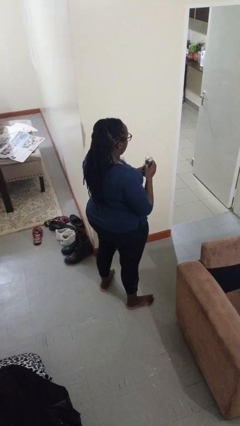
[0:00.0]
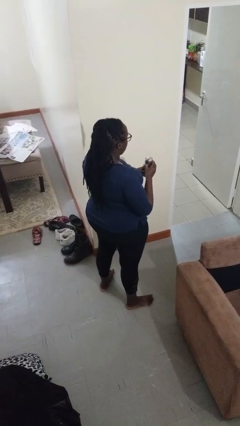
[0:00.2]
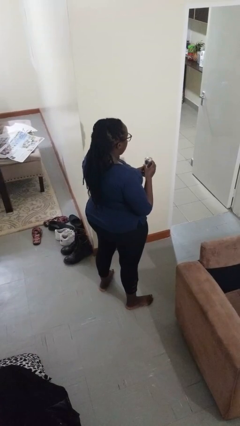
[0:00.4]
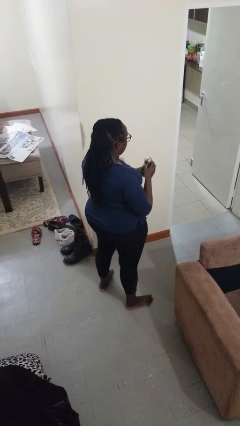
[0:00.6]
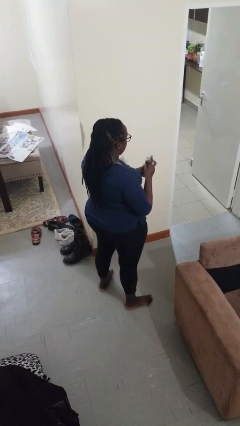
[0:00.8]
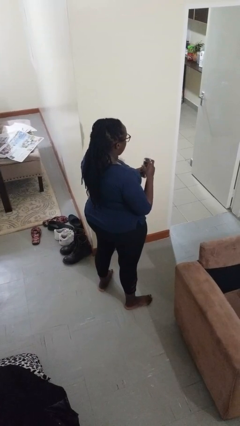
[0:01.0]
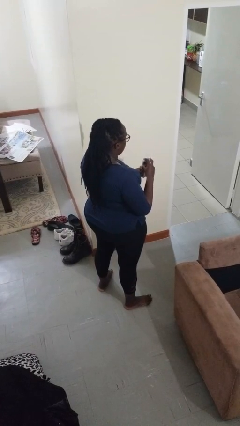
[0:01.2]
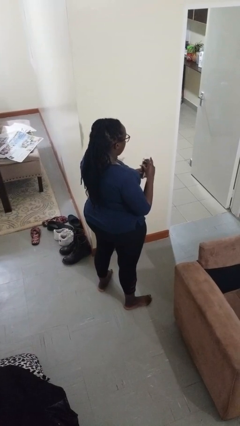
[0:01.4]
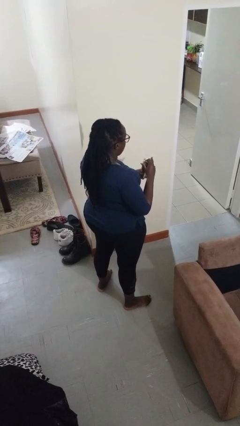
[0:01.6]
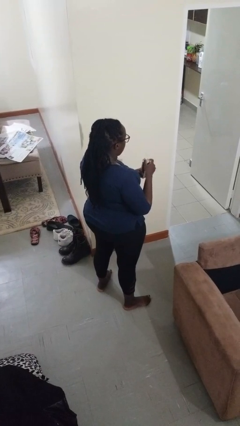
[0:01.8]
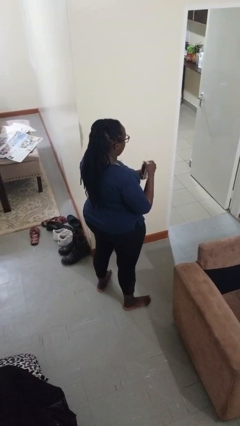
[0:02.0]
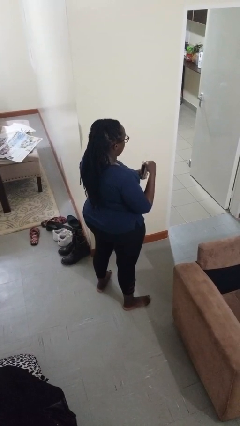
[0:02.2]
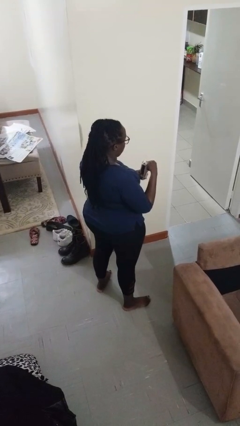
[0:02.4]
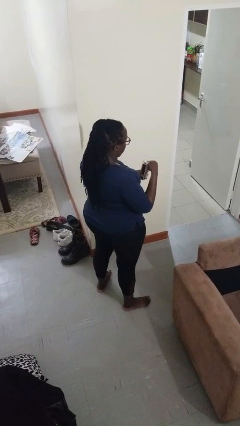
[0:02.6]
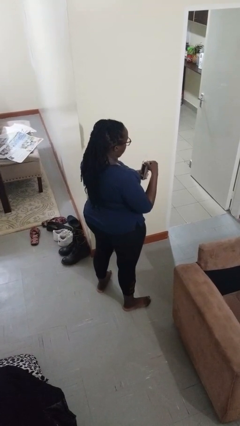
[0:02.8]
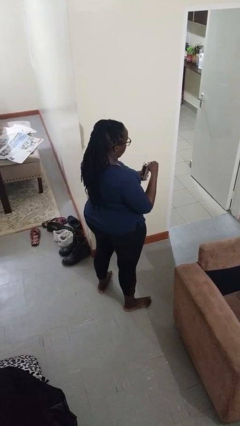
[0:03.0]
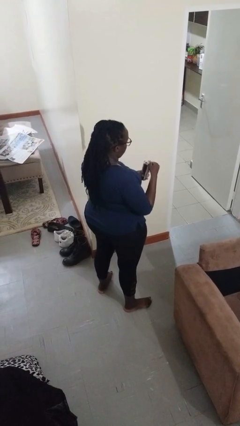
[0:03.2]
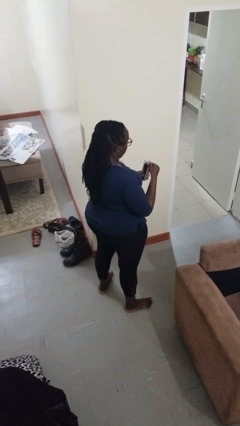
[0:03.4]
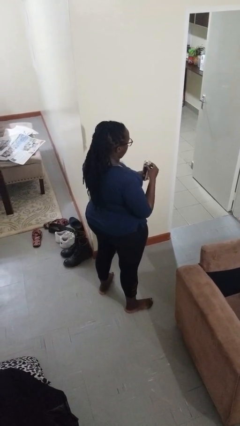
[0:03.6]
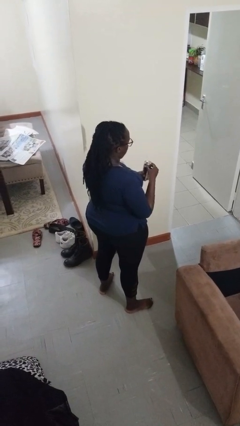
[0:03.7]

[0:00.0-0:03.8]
person opens beverage can

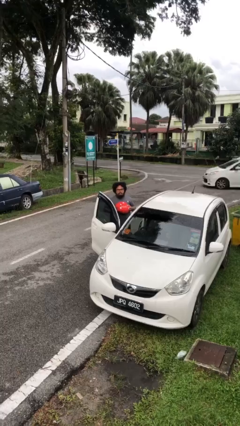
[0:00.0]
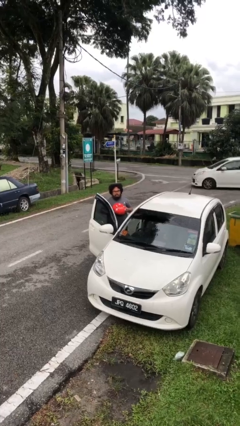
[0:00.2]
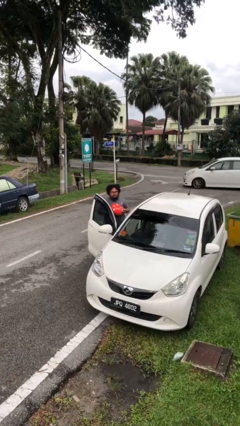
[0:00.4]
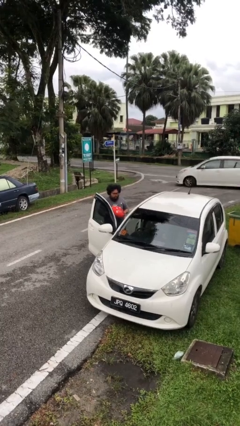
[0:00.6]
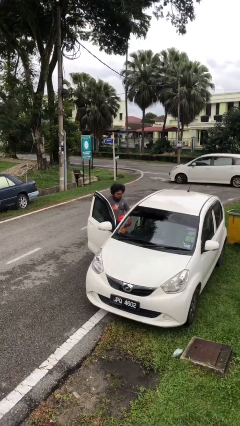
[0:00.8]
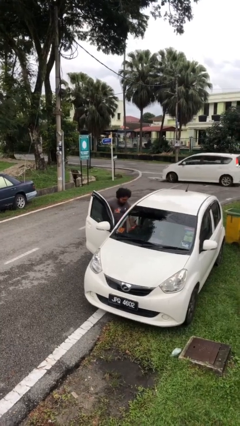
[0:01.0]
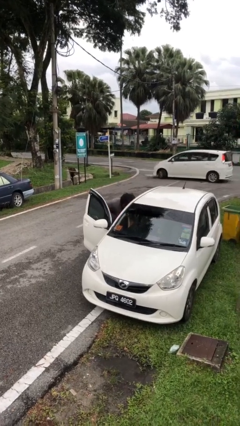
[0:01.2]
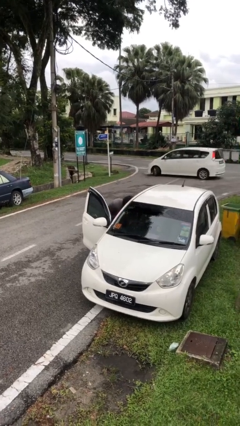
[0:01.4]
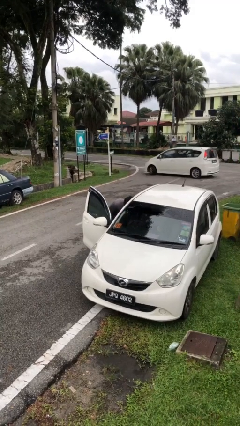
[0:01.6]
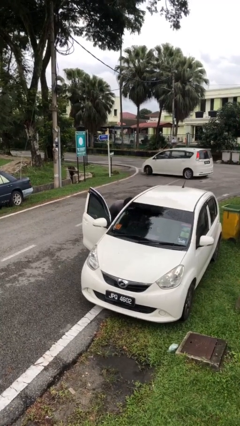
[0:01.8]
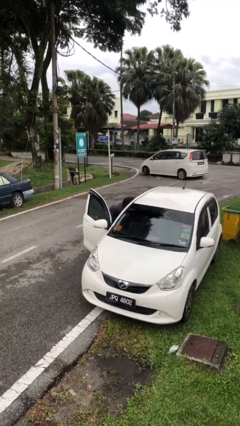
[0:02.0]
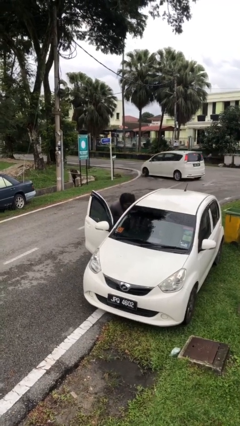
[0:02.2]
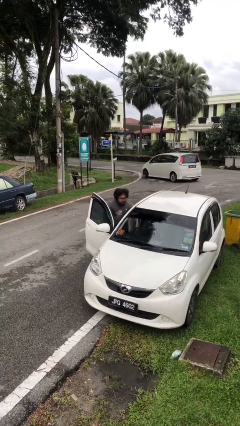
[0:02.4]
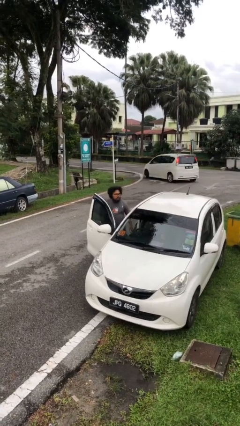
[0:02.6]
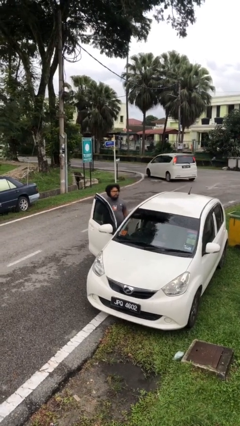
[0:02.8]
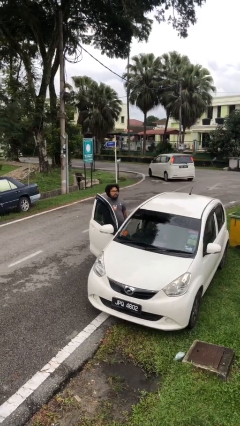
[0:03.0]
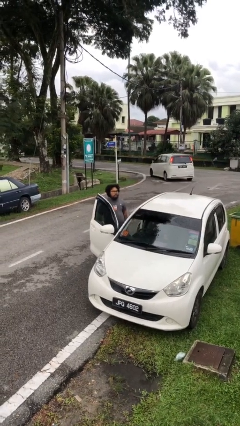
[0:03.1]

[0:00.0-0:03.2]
person loads car

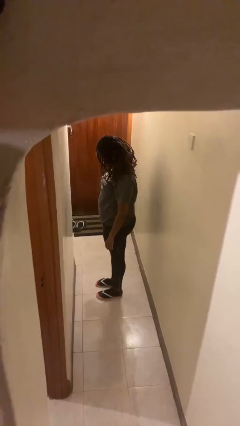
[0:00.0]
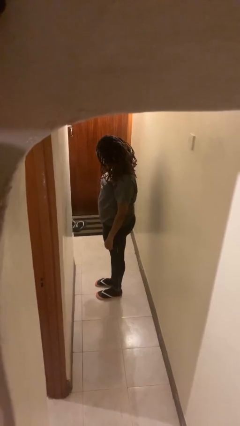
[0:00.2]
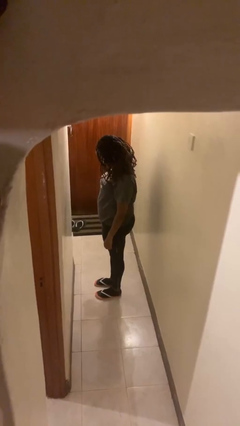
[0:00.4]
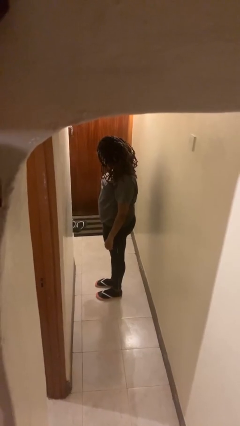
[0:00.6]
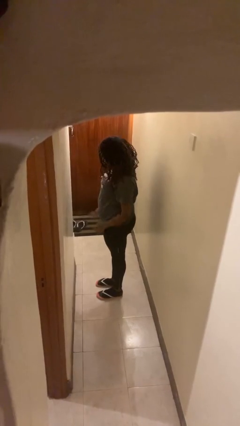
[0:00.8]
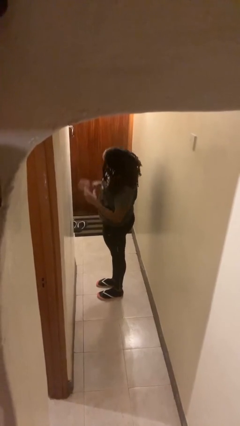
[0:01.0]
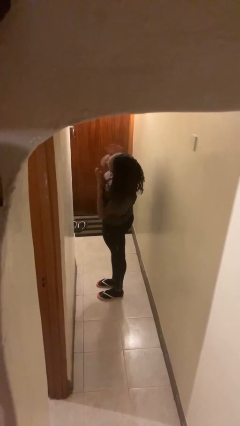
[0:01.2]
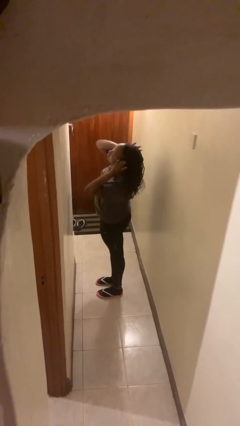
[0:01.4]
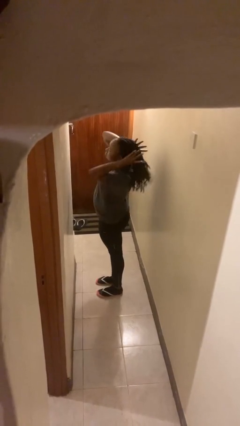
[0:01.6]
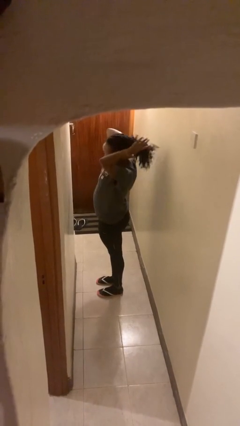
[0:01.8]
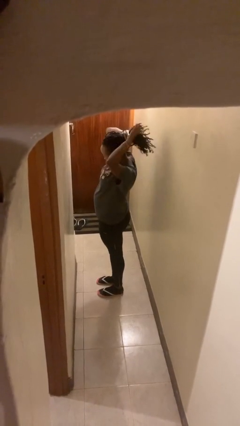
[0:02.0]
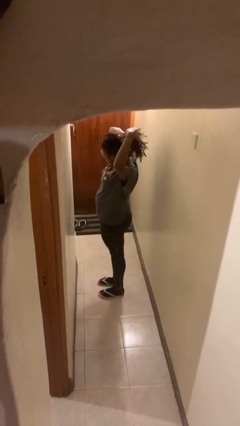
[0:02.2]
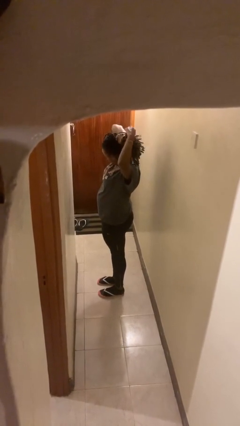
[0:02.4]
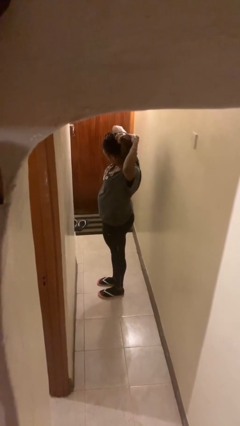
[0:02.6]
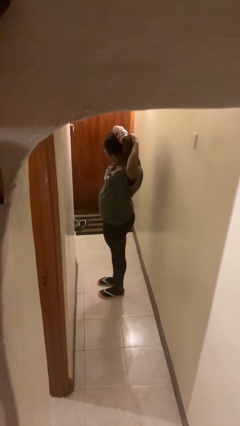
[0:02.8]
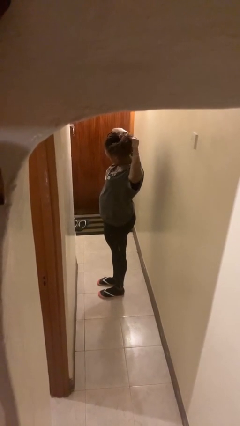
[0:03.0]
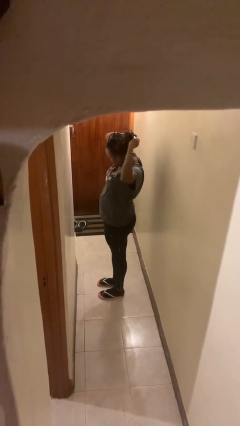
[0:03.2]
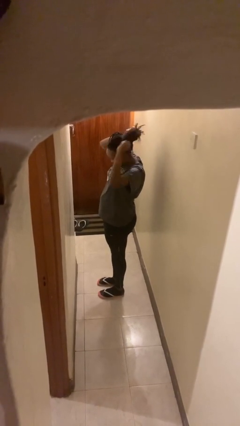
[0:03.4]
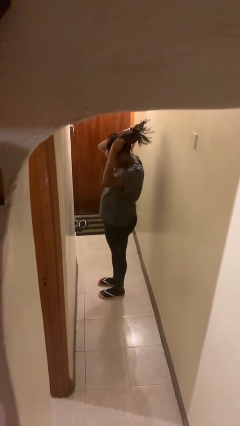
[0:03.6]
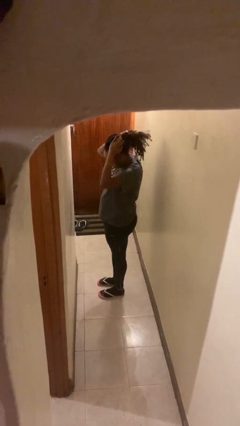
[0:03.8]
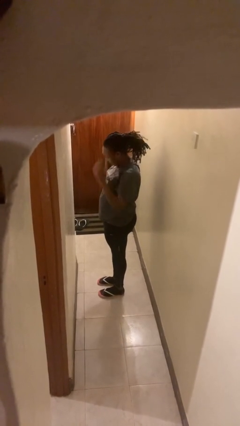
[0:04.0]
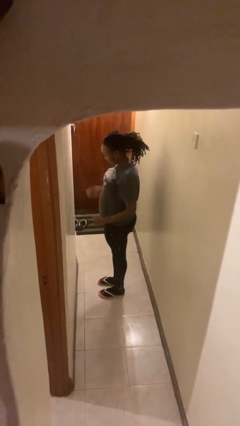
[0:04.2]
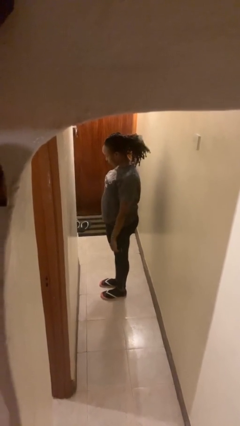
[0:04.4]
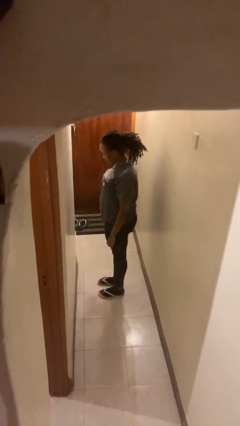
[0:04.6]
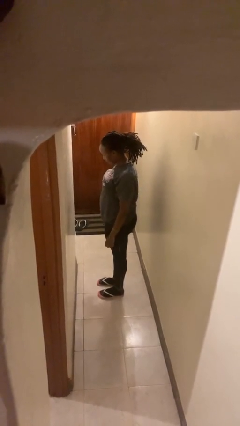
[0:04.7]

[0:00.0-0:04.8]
person puts hair in ponytail

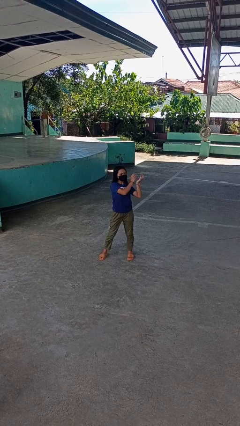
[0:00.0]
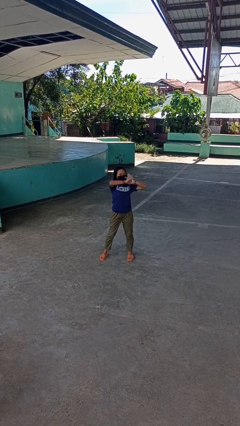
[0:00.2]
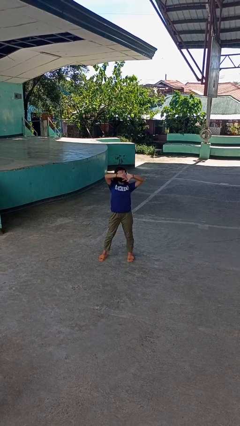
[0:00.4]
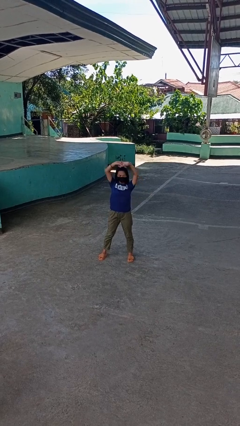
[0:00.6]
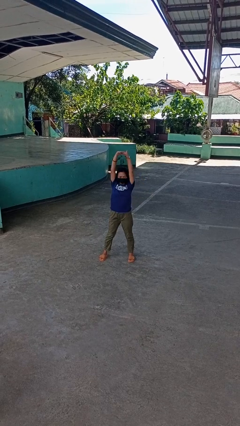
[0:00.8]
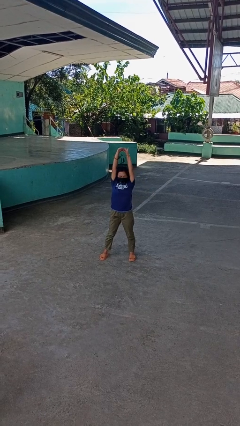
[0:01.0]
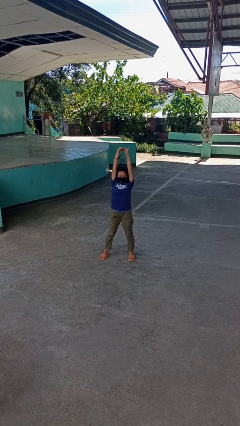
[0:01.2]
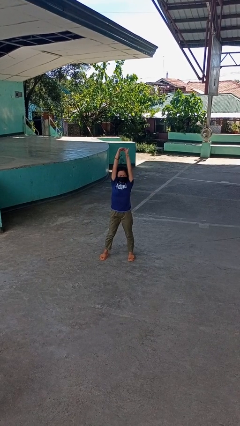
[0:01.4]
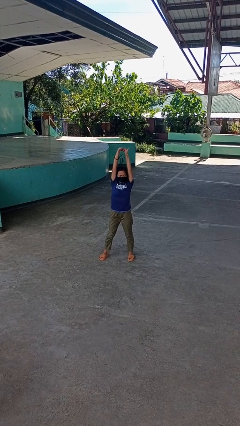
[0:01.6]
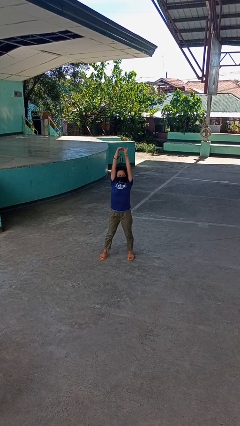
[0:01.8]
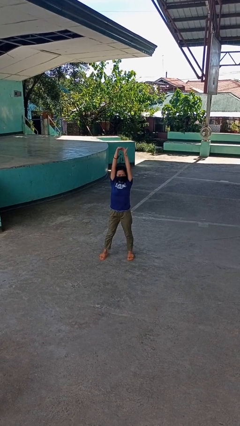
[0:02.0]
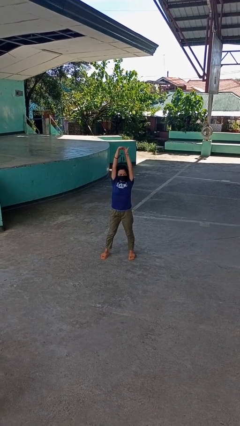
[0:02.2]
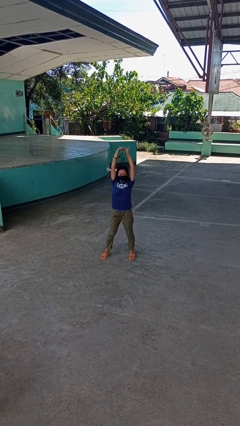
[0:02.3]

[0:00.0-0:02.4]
person stretches arms over head

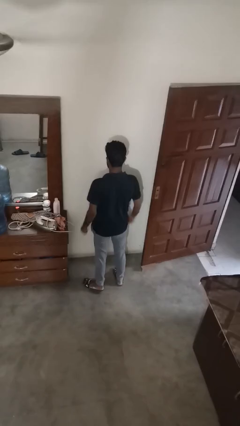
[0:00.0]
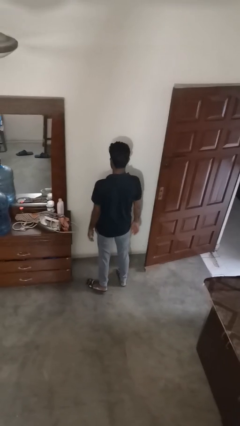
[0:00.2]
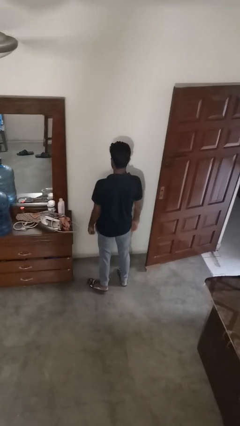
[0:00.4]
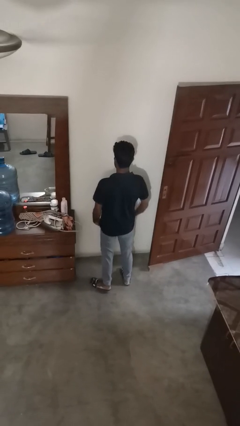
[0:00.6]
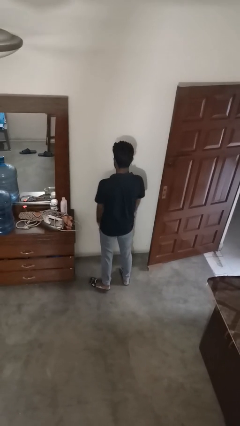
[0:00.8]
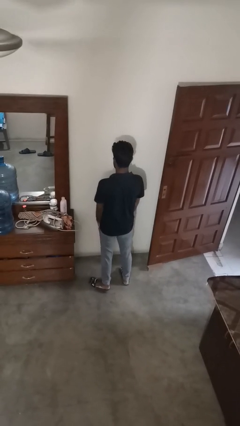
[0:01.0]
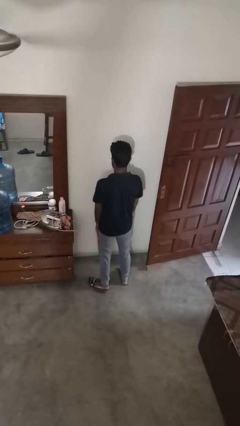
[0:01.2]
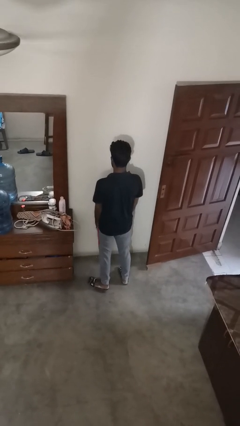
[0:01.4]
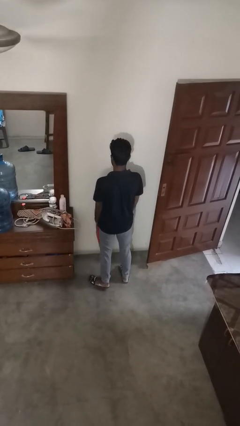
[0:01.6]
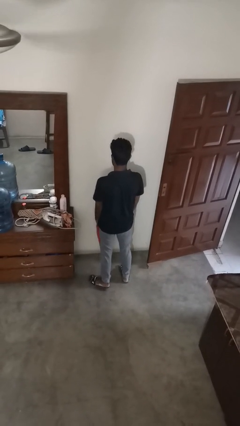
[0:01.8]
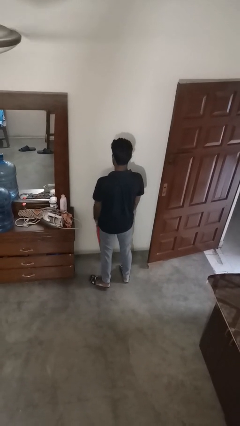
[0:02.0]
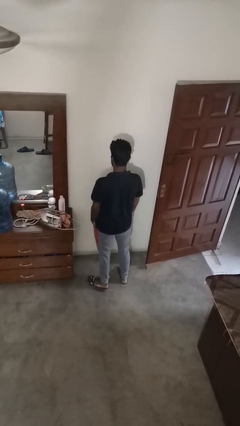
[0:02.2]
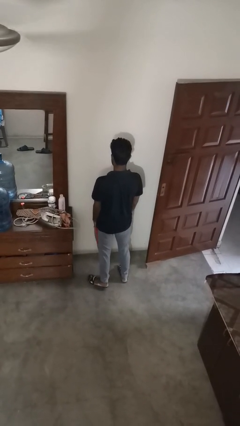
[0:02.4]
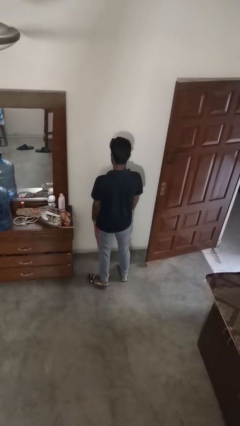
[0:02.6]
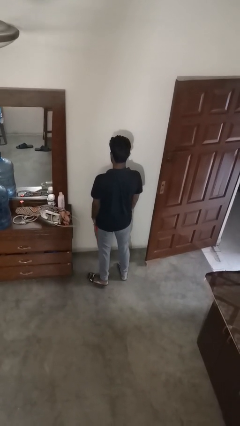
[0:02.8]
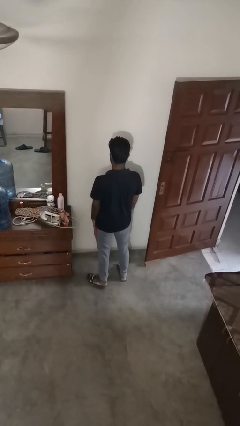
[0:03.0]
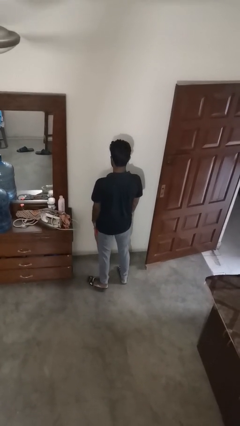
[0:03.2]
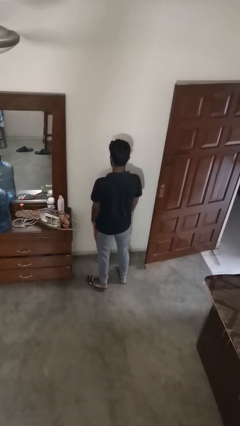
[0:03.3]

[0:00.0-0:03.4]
person puts hands in back pockets
